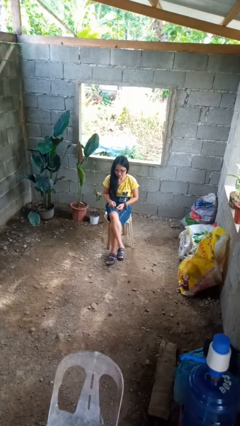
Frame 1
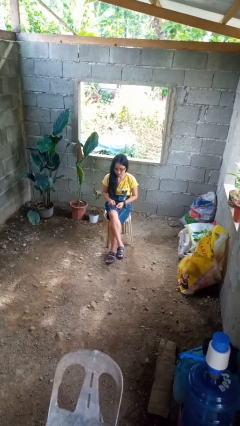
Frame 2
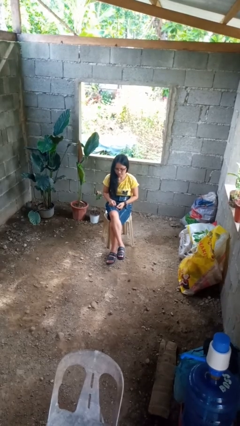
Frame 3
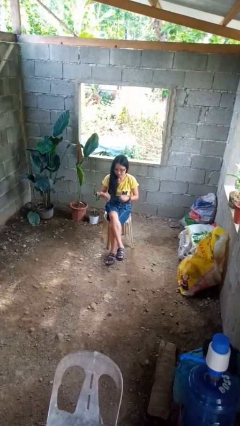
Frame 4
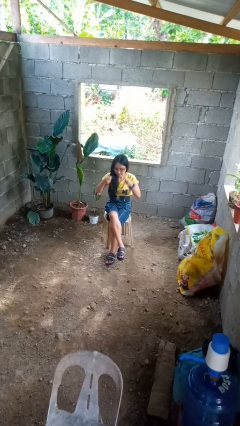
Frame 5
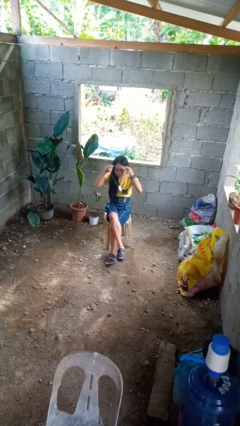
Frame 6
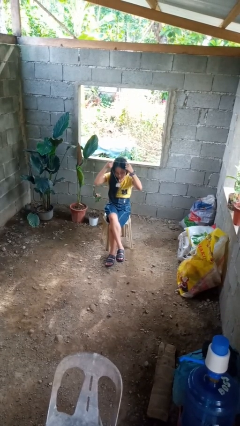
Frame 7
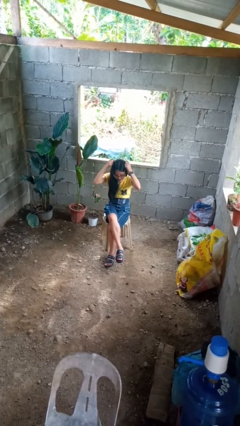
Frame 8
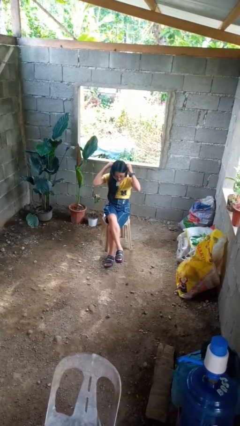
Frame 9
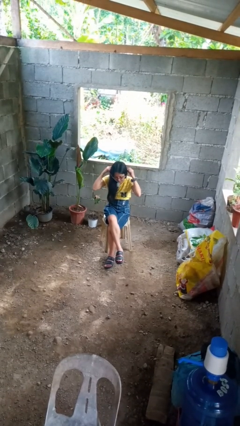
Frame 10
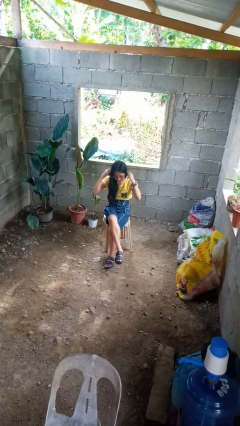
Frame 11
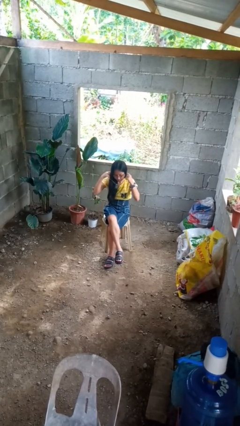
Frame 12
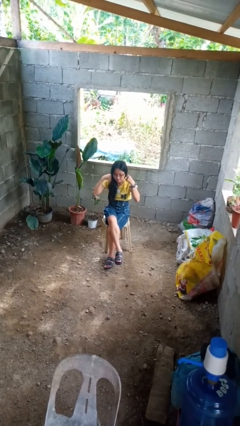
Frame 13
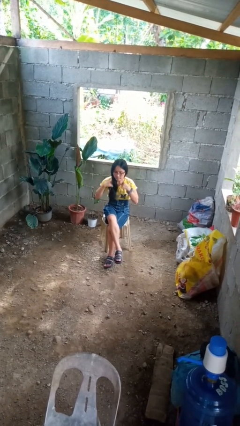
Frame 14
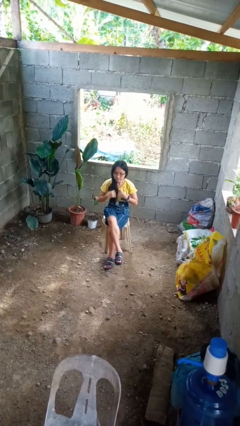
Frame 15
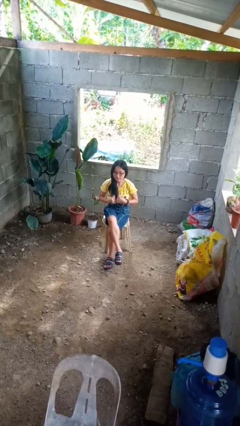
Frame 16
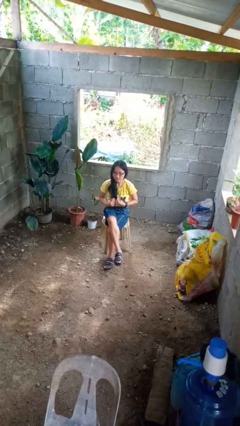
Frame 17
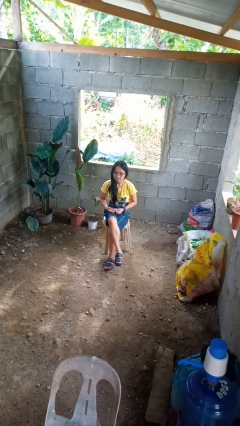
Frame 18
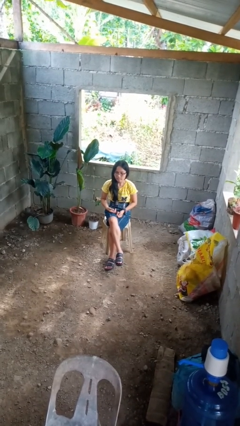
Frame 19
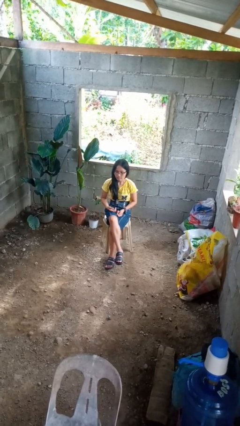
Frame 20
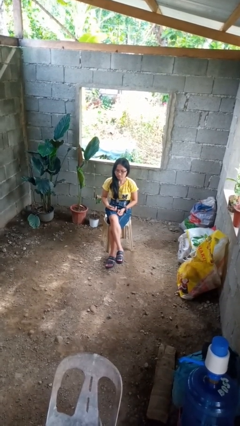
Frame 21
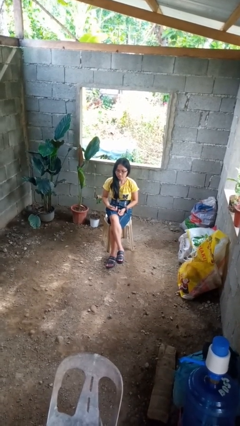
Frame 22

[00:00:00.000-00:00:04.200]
person puts on necklace

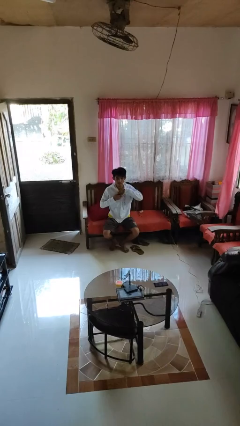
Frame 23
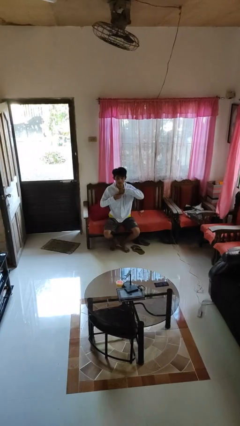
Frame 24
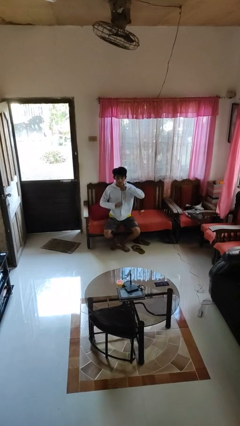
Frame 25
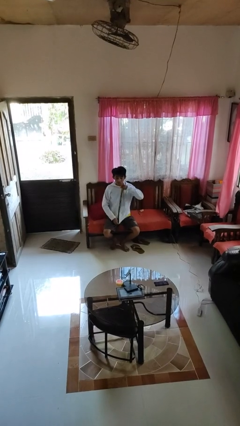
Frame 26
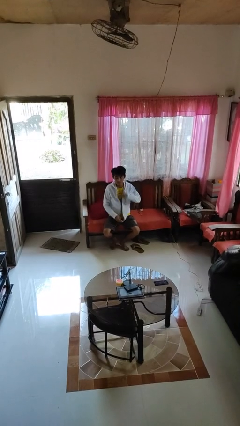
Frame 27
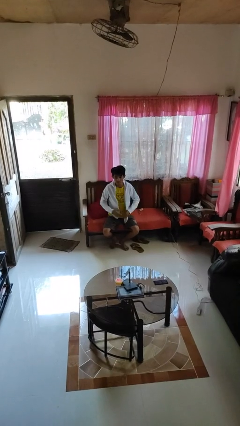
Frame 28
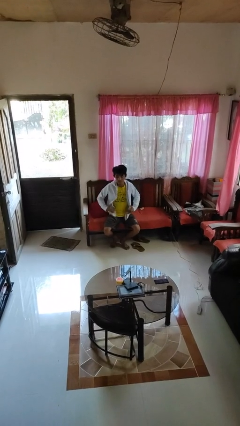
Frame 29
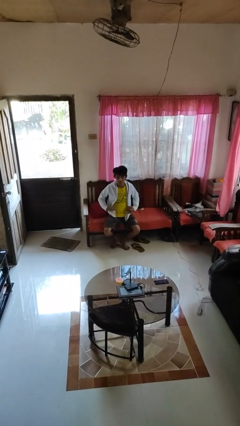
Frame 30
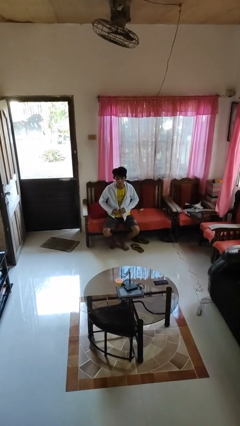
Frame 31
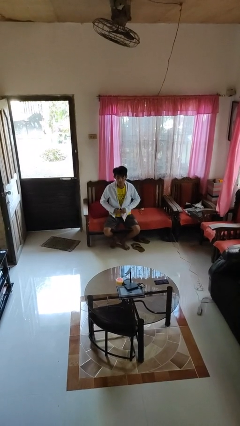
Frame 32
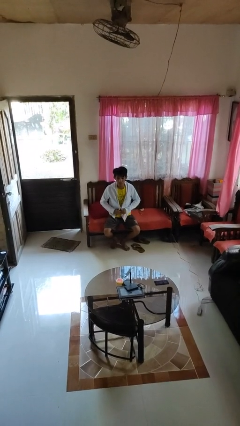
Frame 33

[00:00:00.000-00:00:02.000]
person unzips jacket

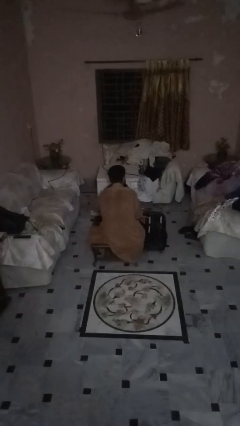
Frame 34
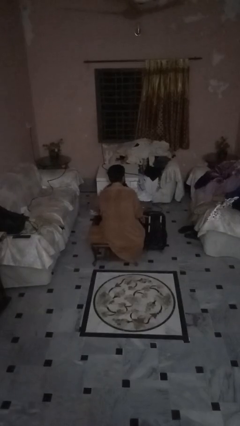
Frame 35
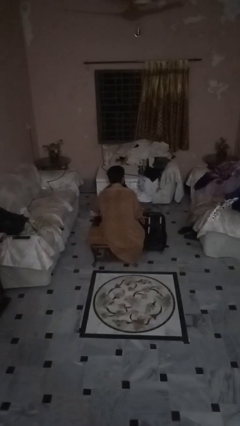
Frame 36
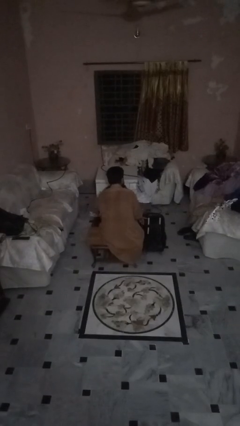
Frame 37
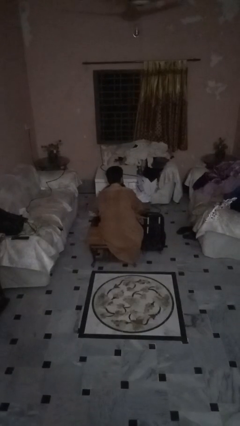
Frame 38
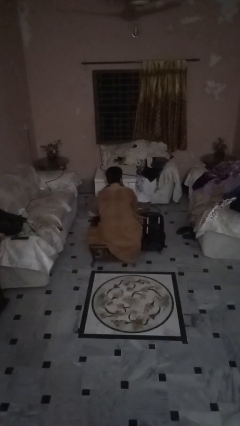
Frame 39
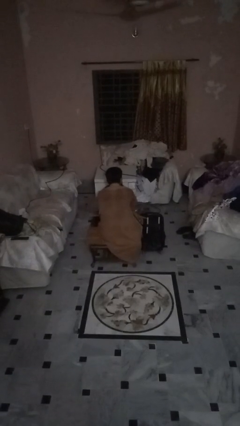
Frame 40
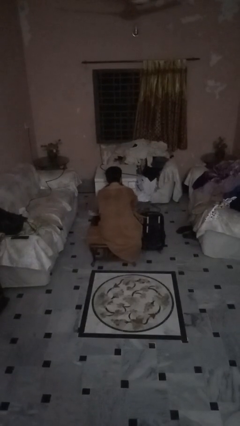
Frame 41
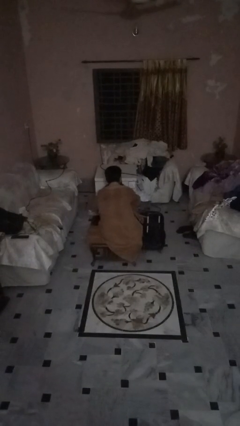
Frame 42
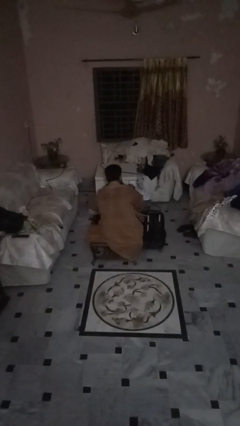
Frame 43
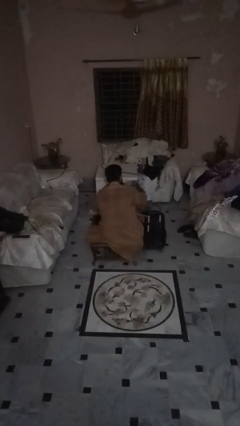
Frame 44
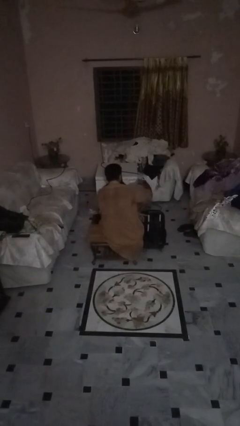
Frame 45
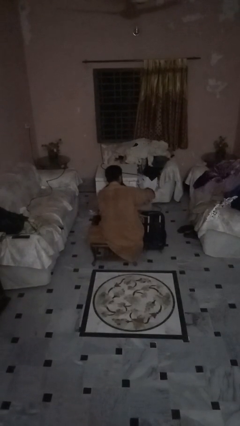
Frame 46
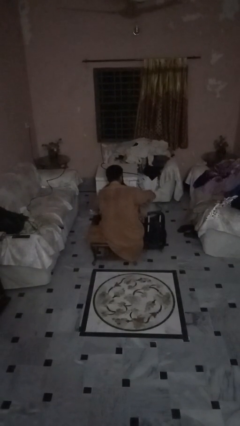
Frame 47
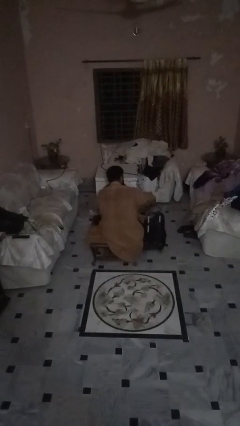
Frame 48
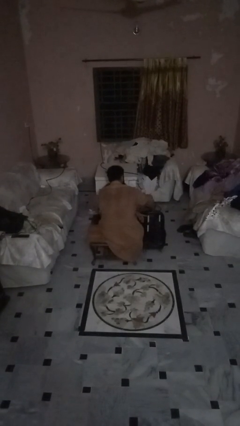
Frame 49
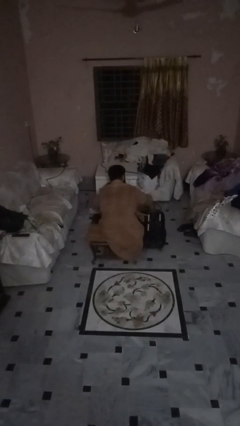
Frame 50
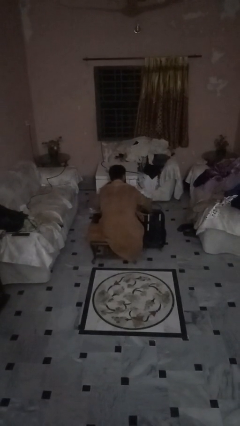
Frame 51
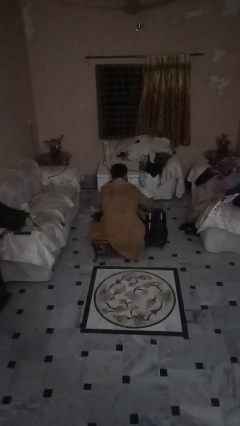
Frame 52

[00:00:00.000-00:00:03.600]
person loads clothes into suitcase

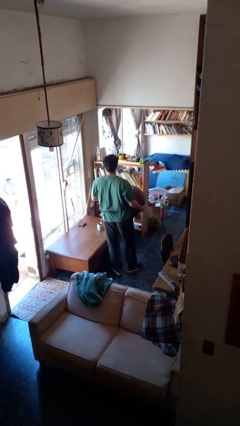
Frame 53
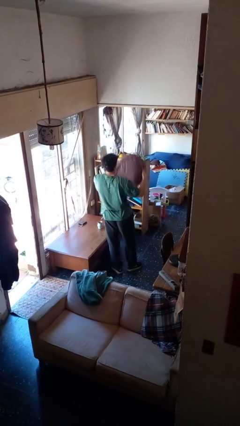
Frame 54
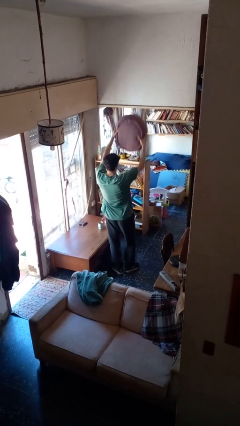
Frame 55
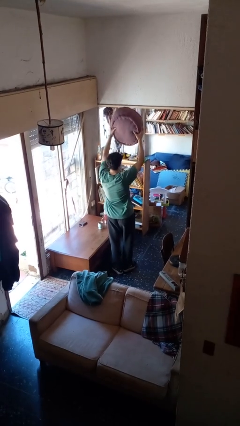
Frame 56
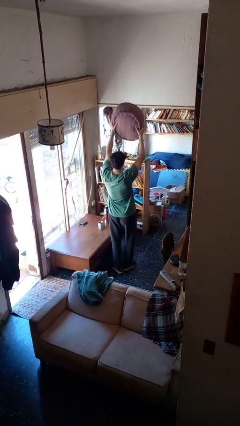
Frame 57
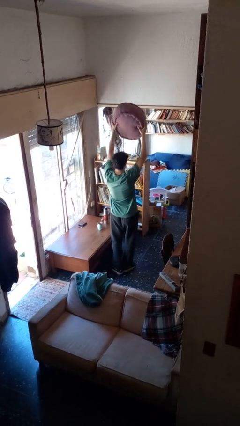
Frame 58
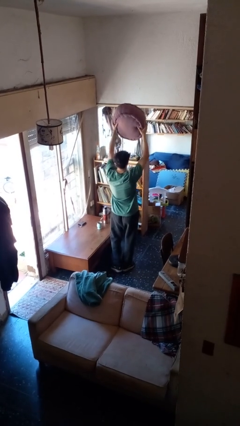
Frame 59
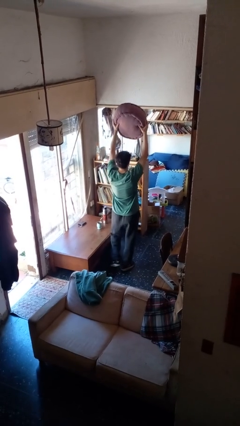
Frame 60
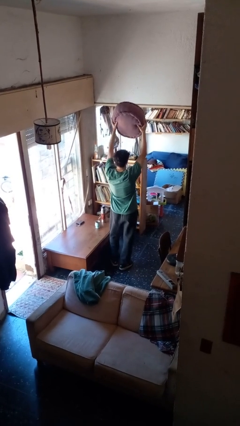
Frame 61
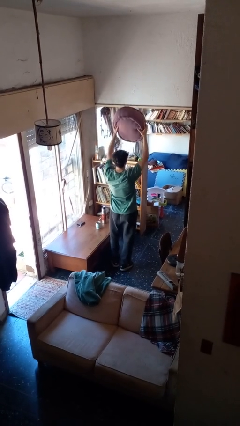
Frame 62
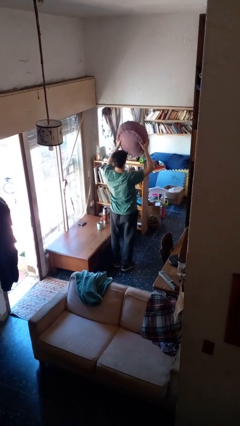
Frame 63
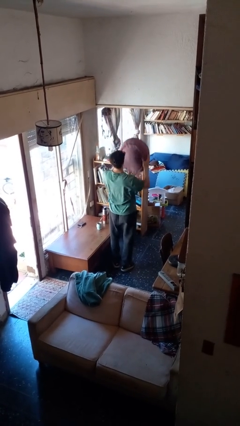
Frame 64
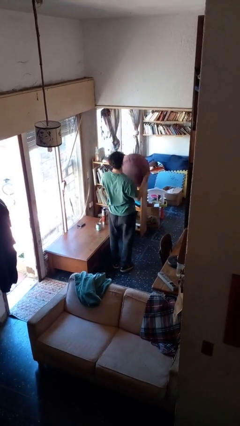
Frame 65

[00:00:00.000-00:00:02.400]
person holds object above head

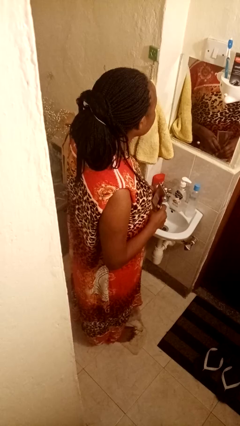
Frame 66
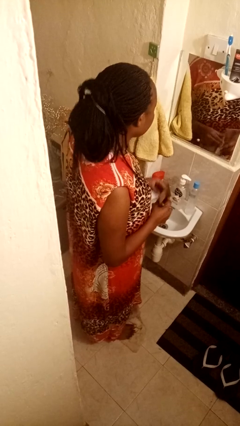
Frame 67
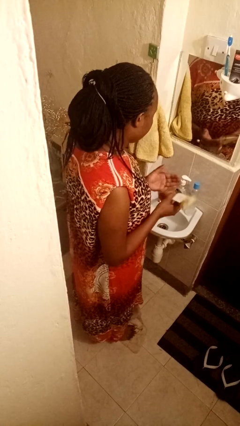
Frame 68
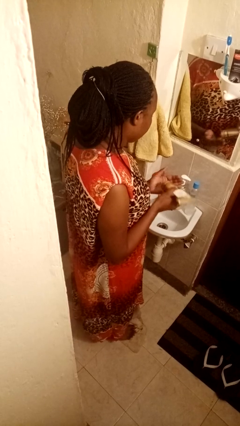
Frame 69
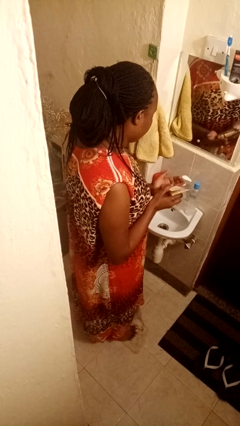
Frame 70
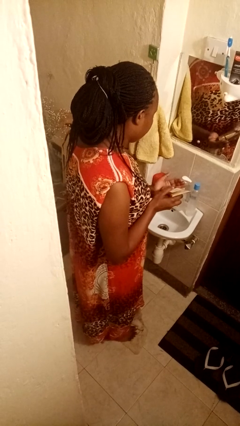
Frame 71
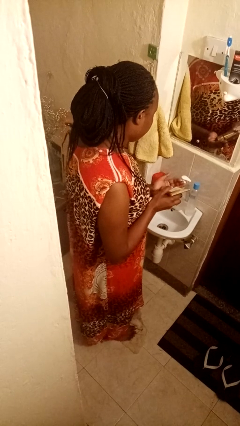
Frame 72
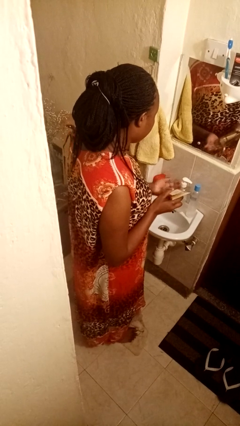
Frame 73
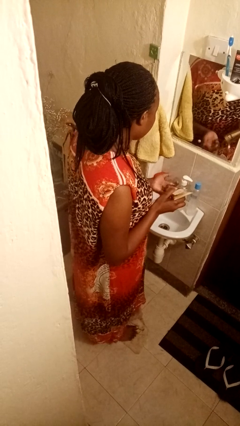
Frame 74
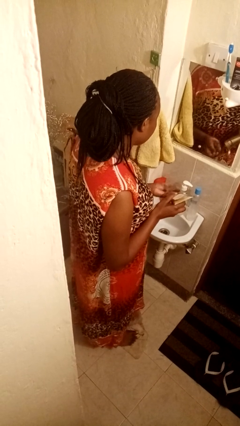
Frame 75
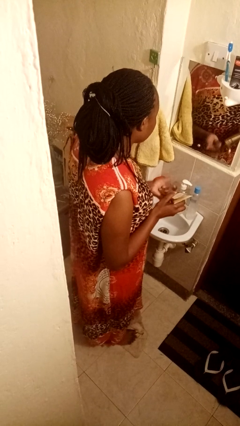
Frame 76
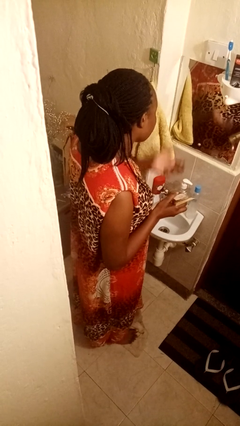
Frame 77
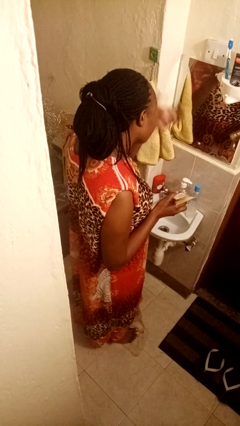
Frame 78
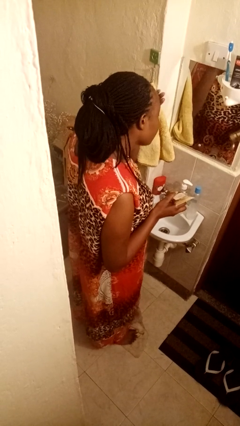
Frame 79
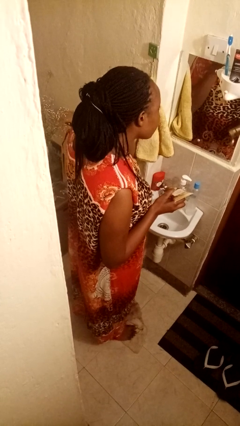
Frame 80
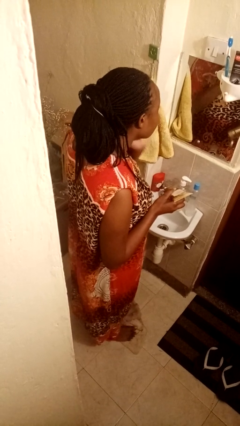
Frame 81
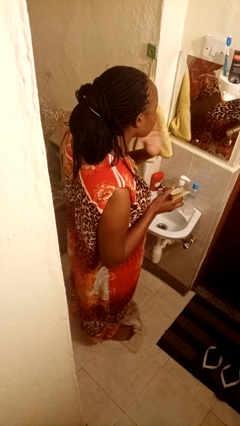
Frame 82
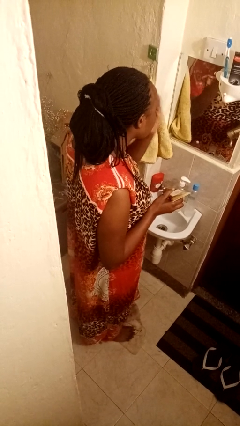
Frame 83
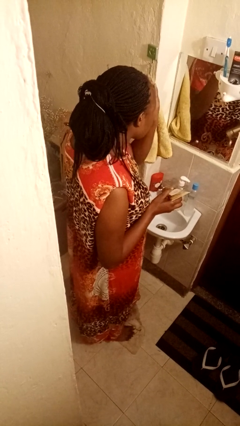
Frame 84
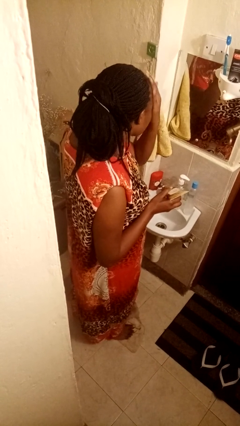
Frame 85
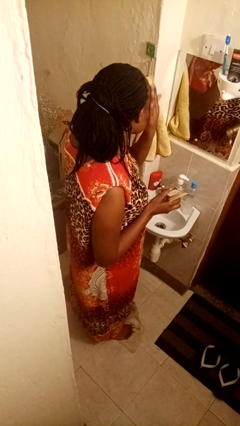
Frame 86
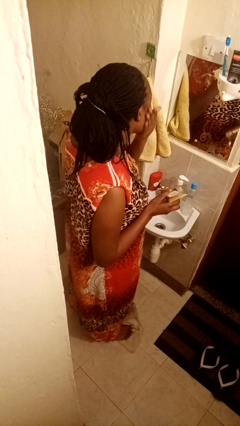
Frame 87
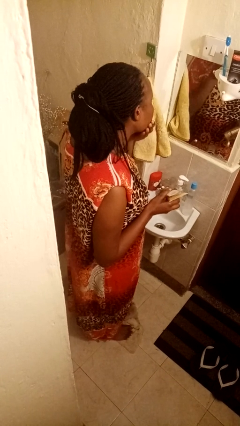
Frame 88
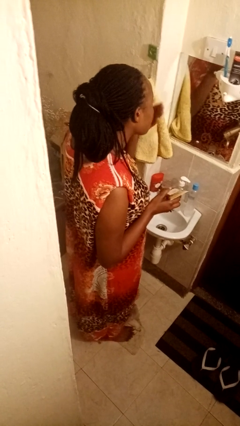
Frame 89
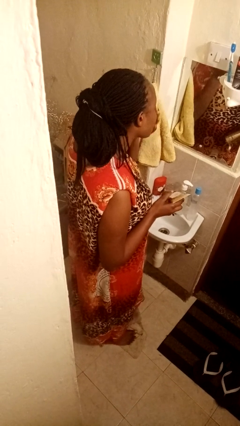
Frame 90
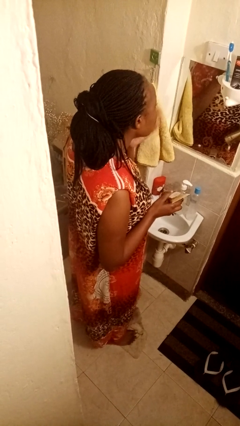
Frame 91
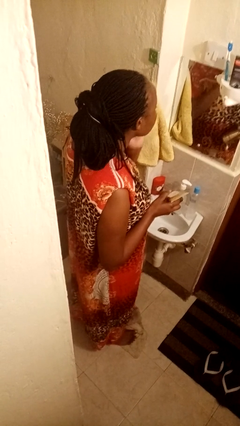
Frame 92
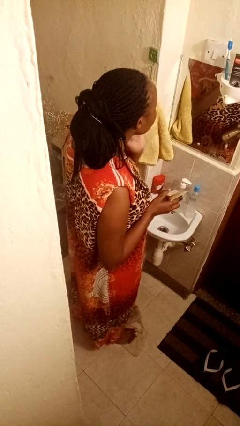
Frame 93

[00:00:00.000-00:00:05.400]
person applies facial moisturizer

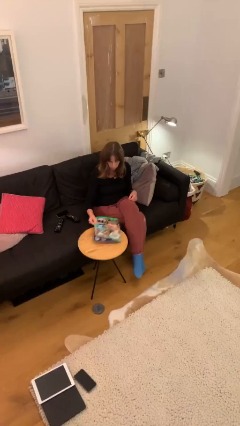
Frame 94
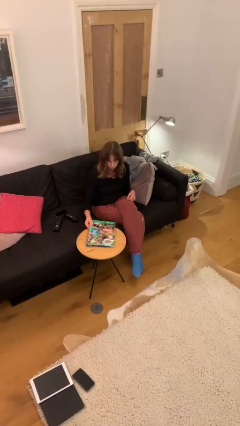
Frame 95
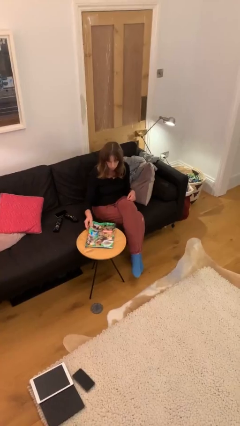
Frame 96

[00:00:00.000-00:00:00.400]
person puts down object on table
